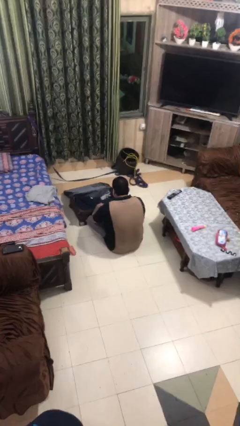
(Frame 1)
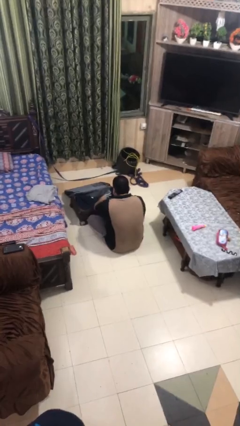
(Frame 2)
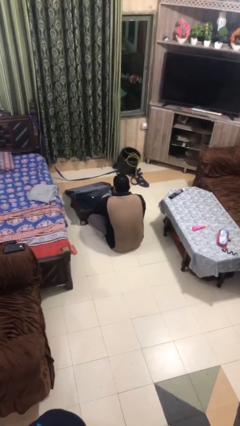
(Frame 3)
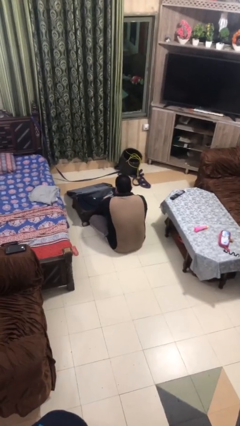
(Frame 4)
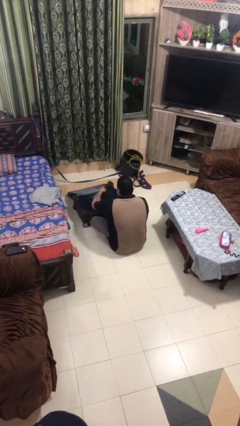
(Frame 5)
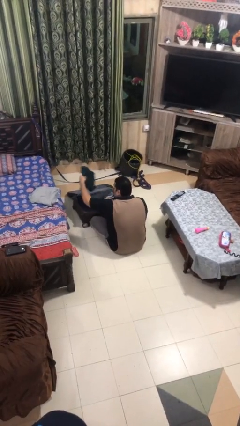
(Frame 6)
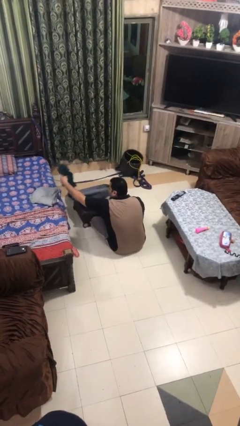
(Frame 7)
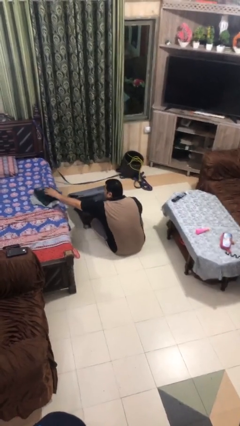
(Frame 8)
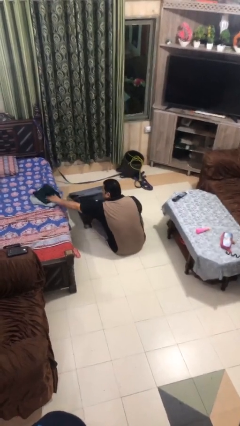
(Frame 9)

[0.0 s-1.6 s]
person unloads clothes from suitcase

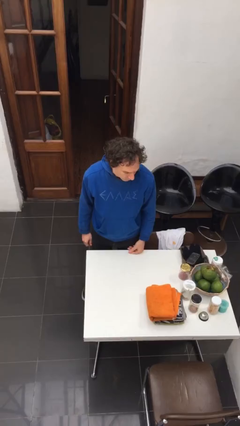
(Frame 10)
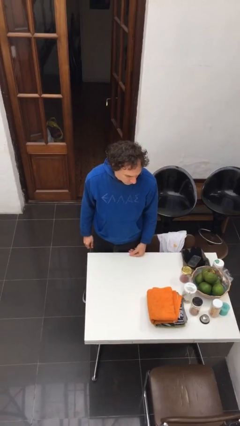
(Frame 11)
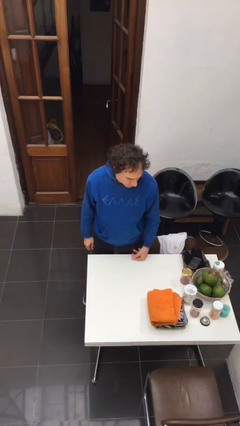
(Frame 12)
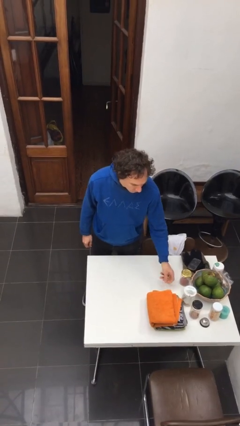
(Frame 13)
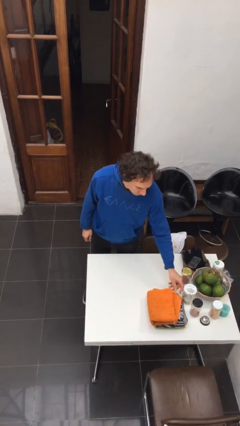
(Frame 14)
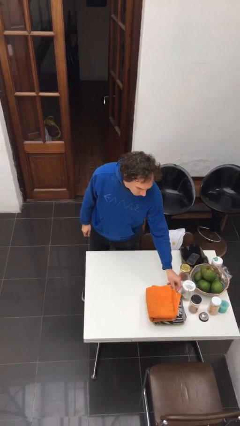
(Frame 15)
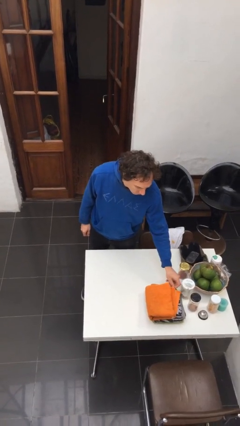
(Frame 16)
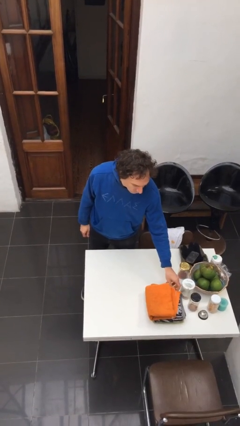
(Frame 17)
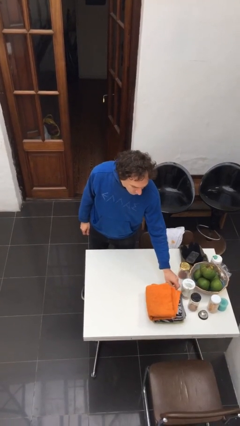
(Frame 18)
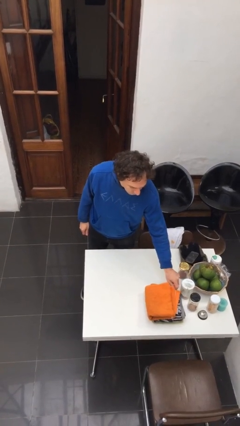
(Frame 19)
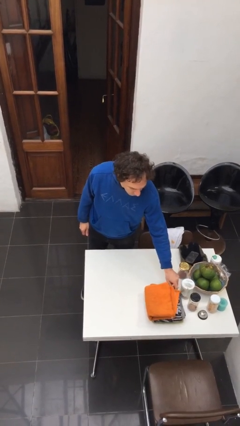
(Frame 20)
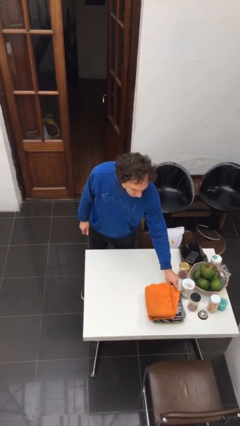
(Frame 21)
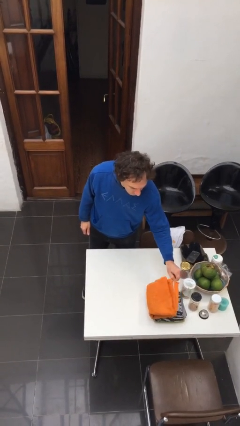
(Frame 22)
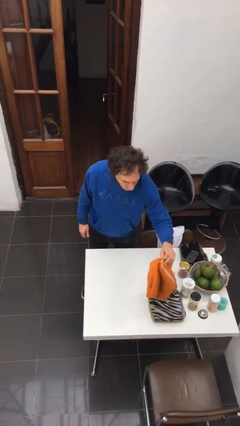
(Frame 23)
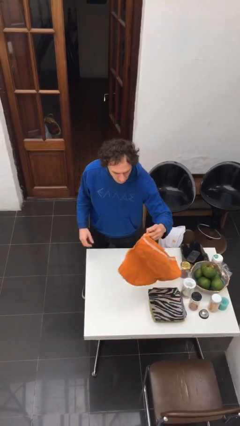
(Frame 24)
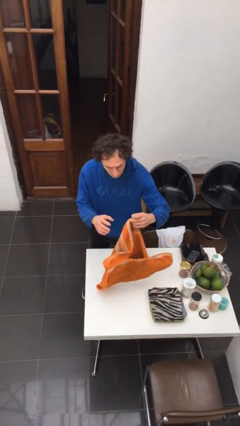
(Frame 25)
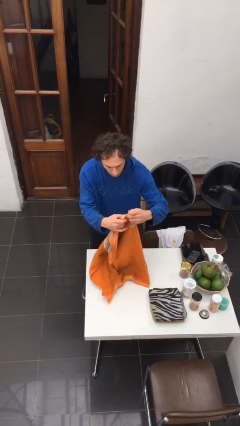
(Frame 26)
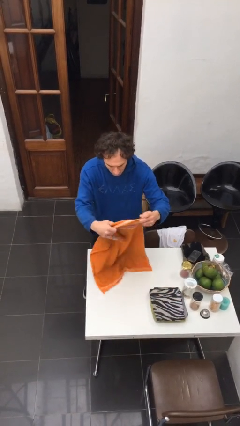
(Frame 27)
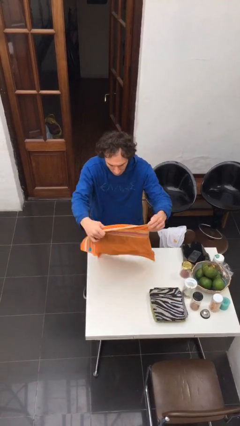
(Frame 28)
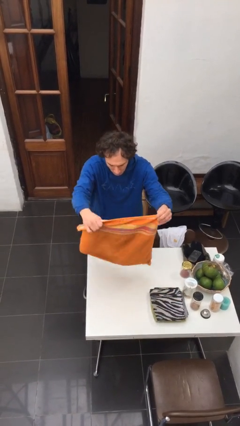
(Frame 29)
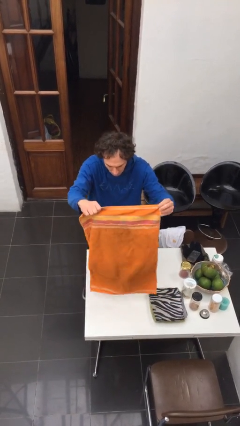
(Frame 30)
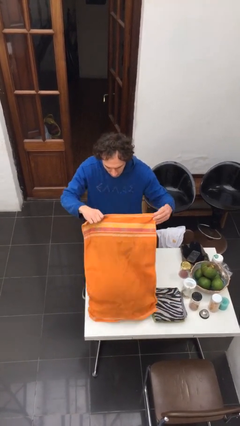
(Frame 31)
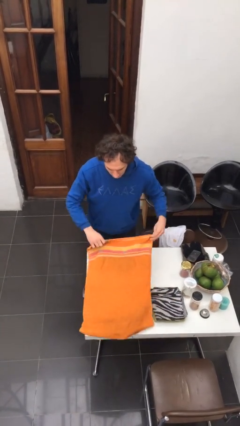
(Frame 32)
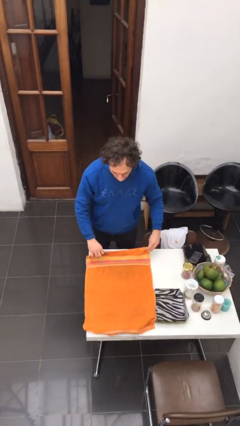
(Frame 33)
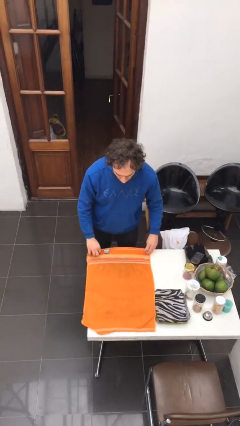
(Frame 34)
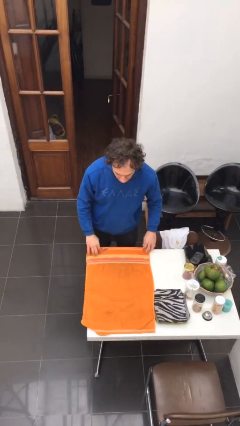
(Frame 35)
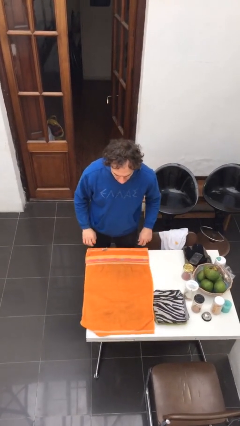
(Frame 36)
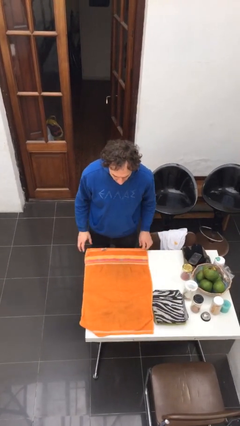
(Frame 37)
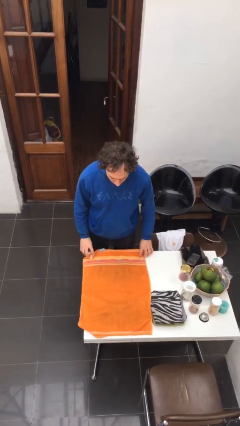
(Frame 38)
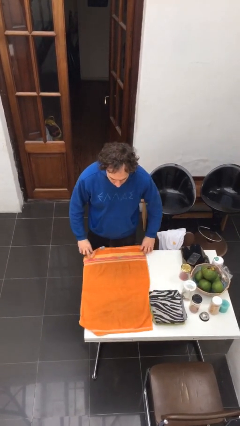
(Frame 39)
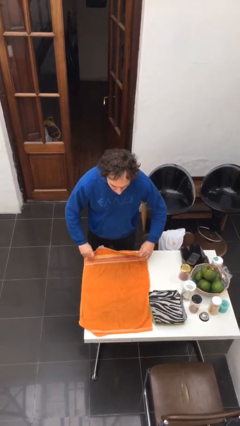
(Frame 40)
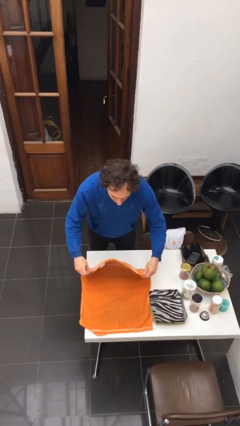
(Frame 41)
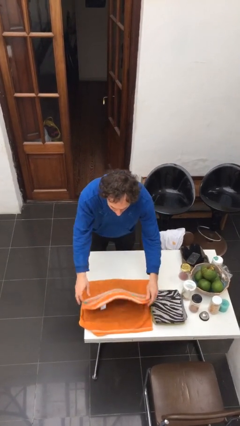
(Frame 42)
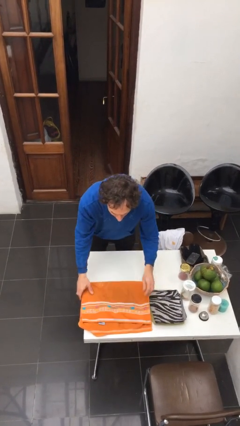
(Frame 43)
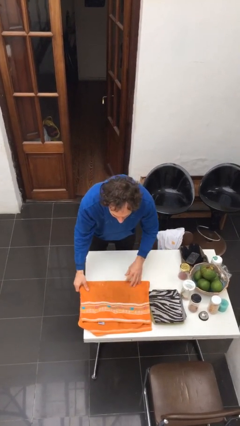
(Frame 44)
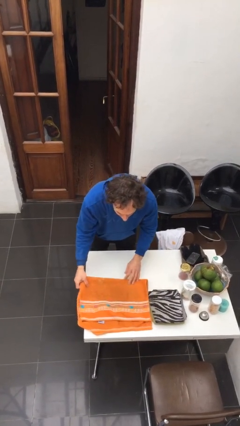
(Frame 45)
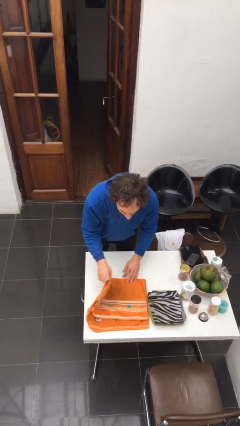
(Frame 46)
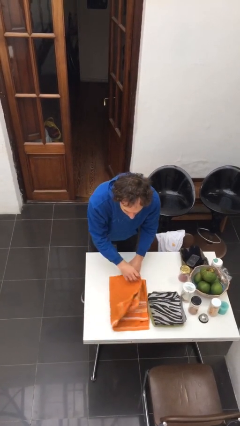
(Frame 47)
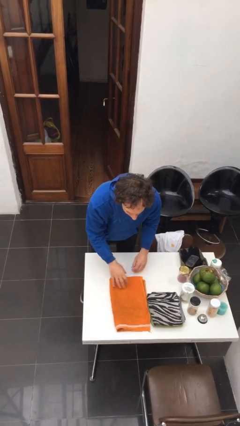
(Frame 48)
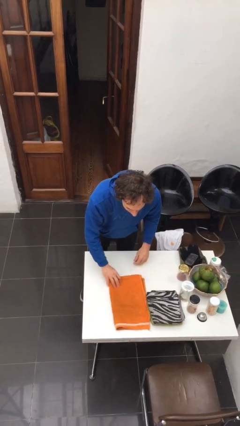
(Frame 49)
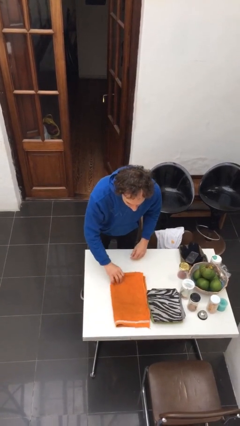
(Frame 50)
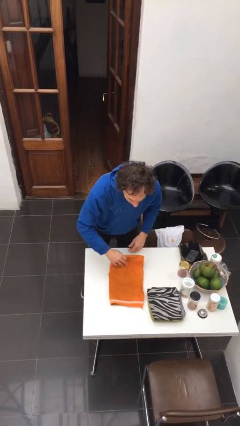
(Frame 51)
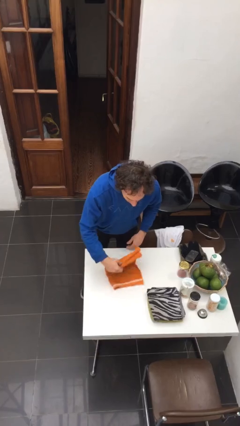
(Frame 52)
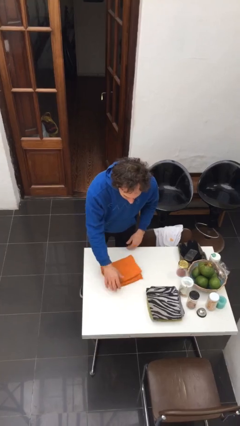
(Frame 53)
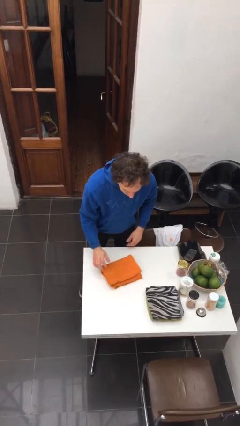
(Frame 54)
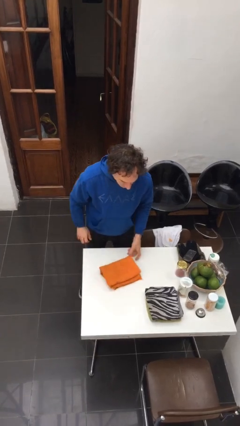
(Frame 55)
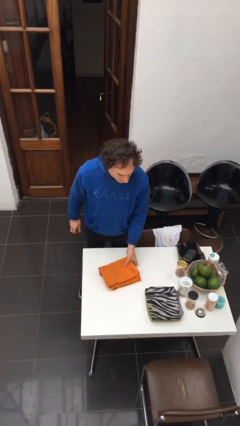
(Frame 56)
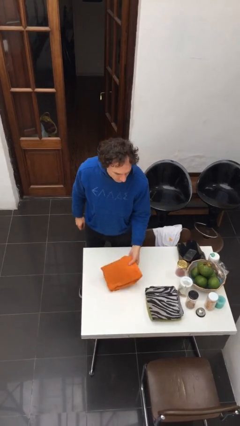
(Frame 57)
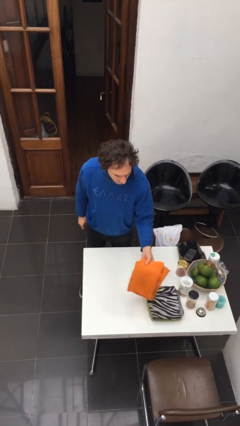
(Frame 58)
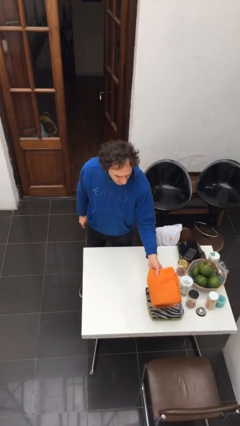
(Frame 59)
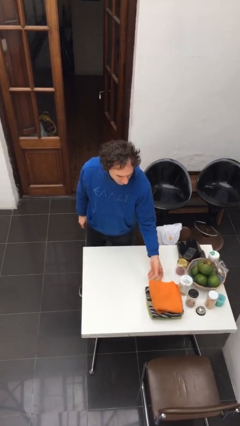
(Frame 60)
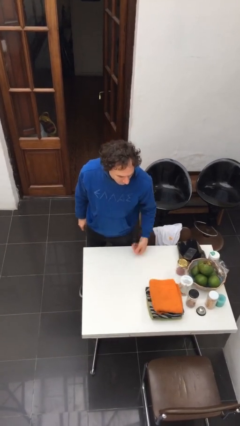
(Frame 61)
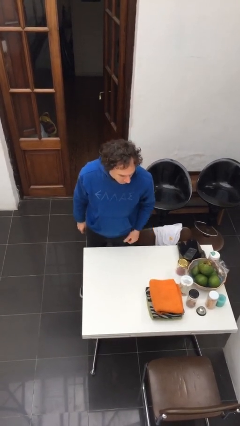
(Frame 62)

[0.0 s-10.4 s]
person folds towel

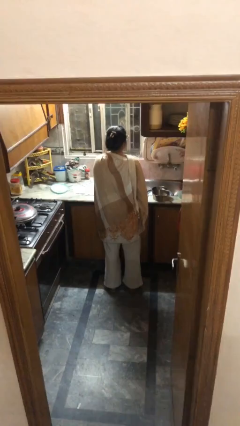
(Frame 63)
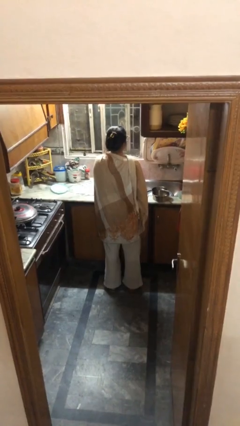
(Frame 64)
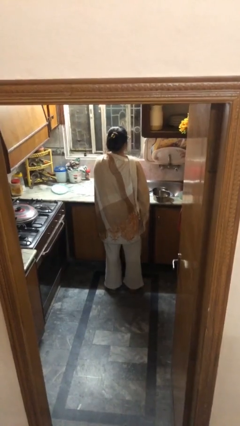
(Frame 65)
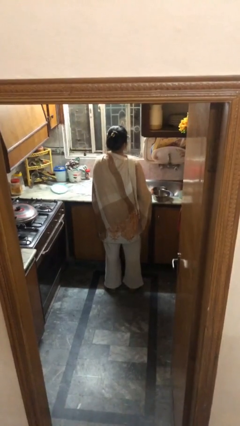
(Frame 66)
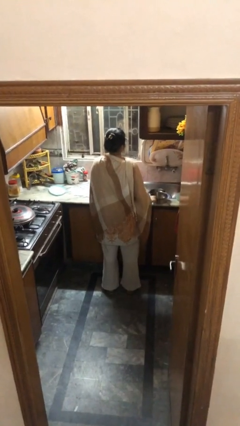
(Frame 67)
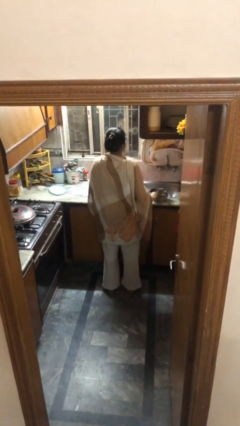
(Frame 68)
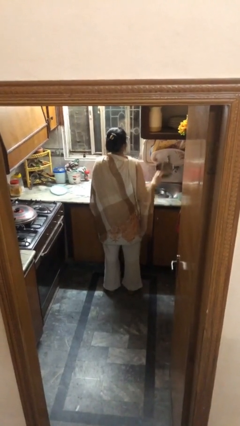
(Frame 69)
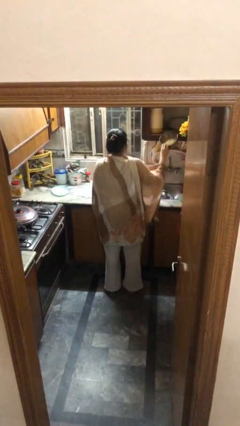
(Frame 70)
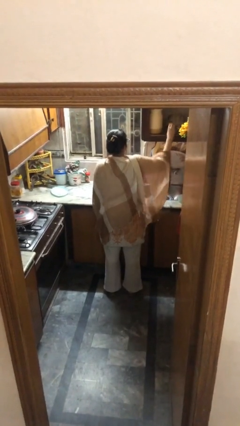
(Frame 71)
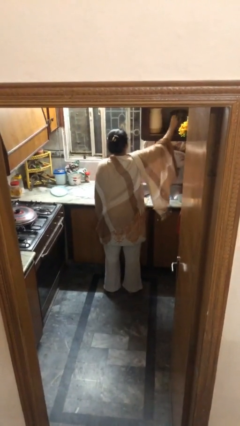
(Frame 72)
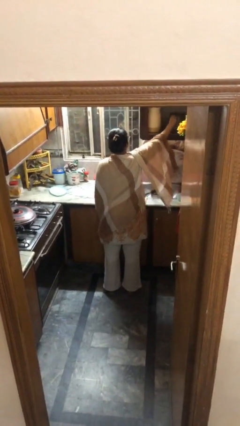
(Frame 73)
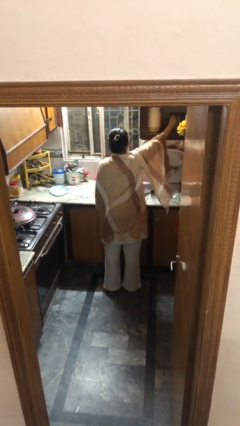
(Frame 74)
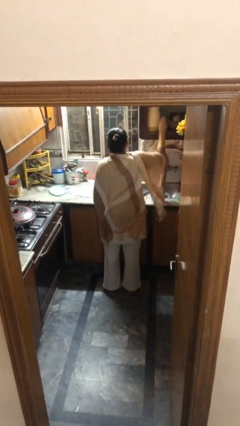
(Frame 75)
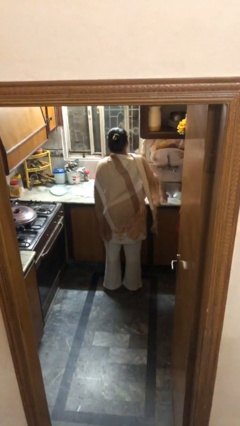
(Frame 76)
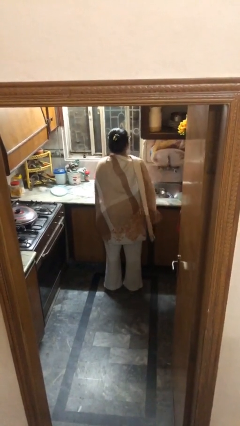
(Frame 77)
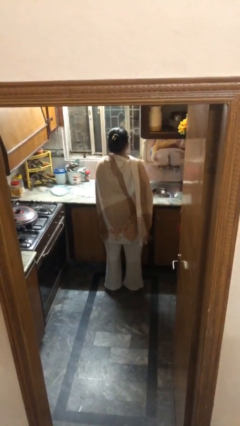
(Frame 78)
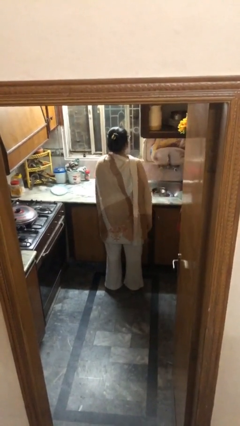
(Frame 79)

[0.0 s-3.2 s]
person puts object in cabinet

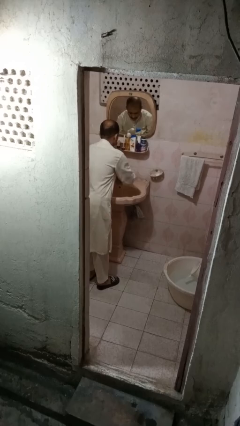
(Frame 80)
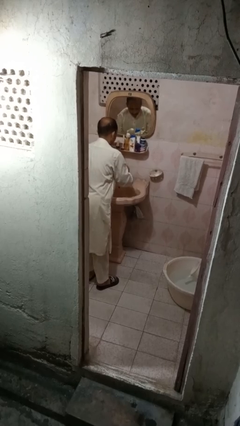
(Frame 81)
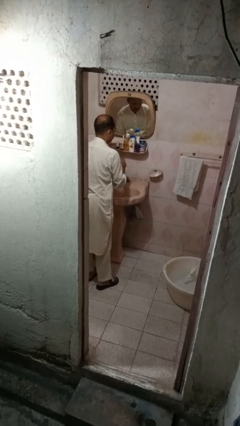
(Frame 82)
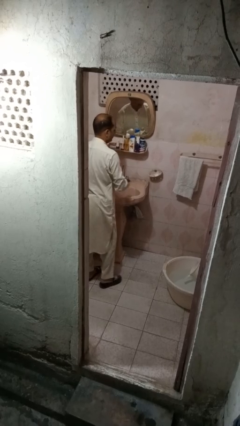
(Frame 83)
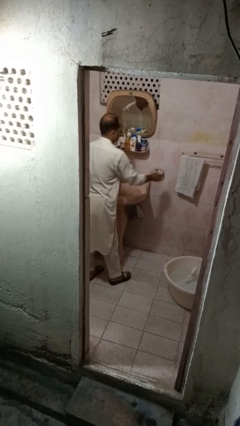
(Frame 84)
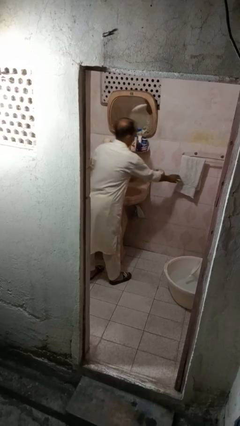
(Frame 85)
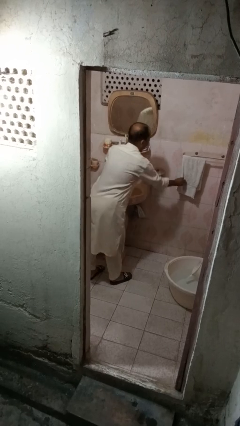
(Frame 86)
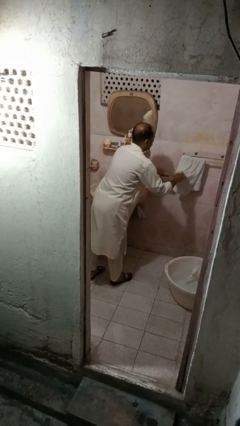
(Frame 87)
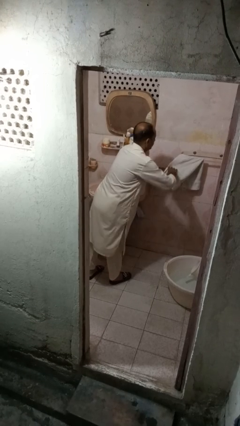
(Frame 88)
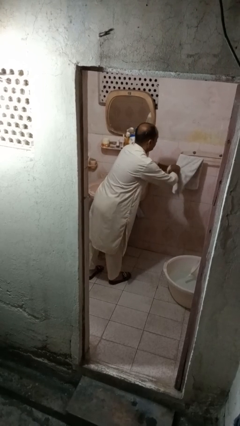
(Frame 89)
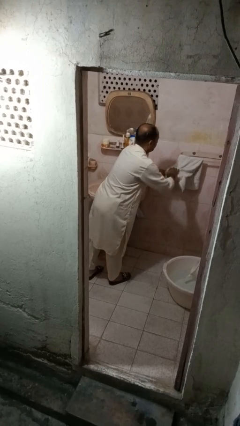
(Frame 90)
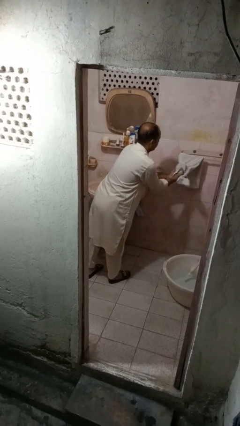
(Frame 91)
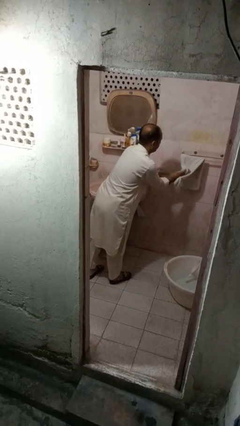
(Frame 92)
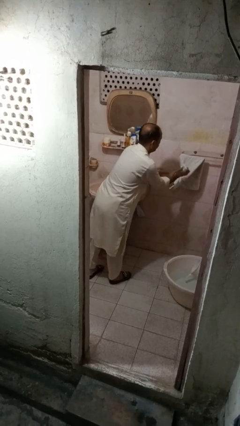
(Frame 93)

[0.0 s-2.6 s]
person dries hands with towel
